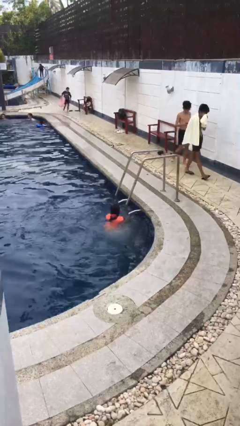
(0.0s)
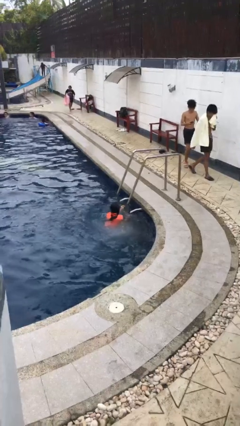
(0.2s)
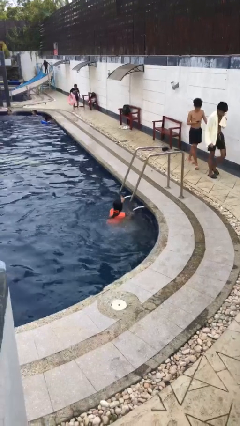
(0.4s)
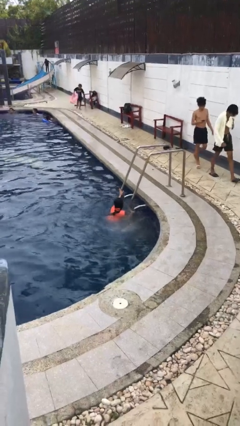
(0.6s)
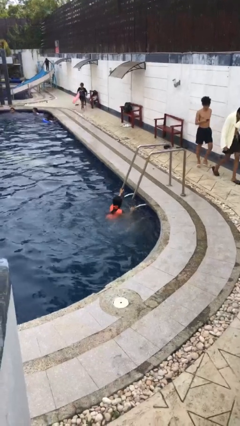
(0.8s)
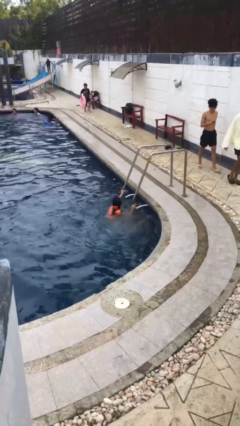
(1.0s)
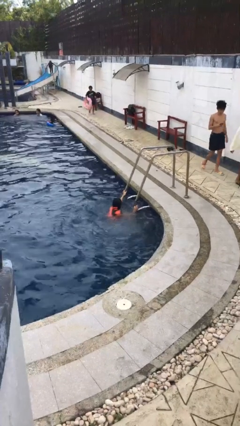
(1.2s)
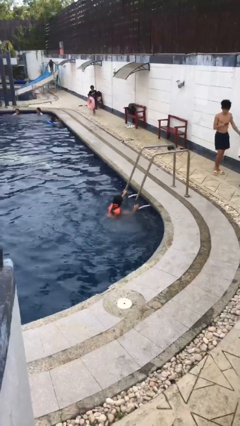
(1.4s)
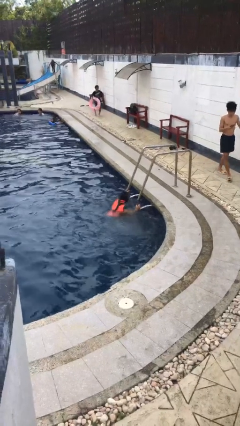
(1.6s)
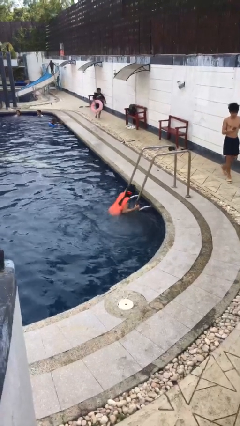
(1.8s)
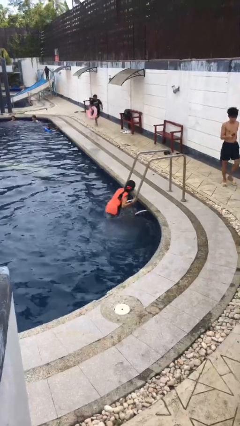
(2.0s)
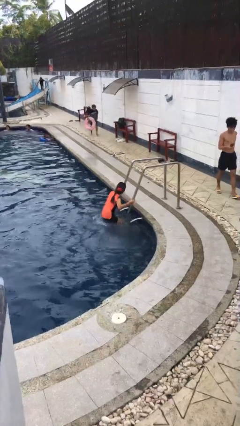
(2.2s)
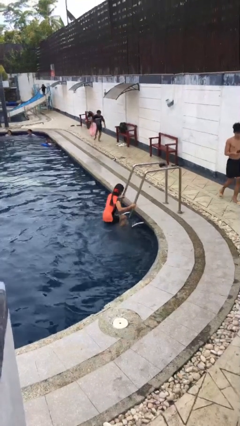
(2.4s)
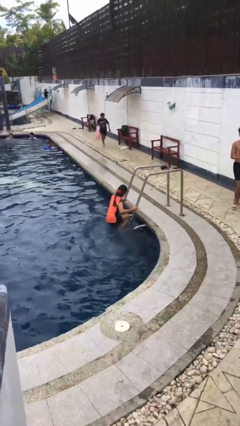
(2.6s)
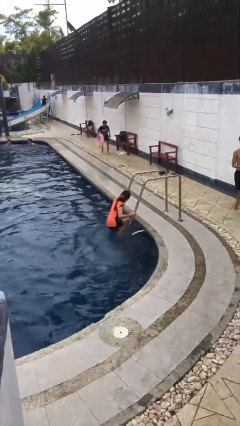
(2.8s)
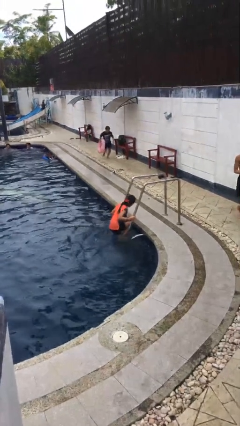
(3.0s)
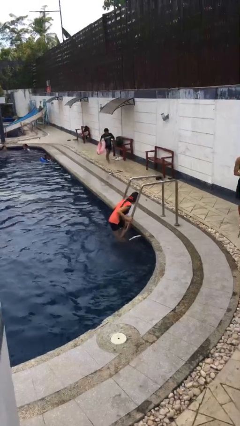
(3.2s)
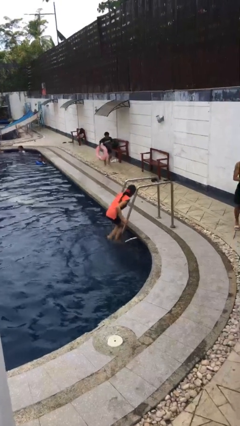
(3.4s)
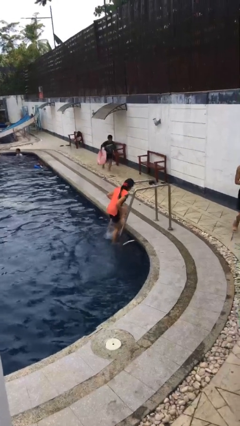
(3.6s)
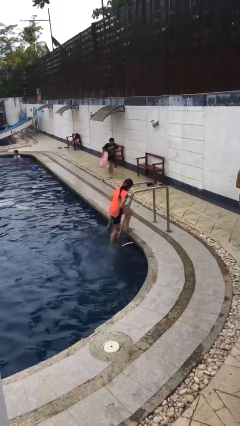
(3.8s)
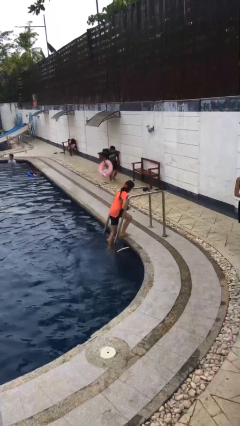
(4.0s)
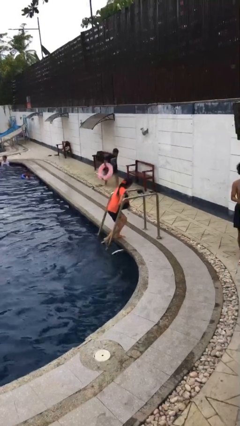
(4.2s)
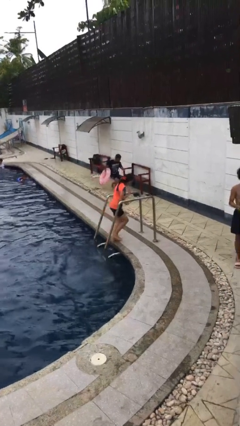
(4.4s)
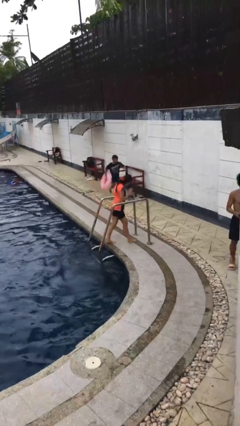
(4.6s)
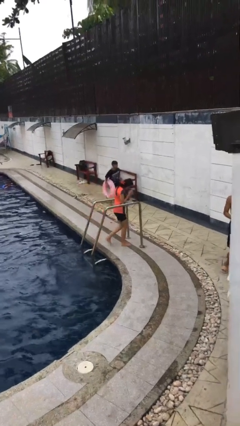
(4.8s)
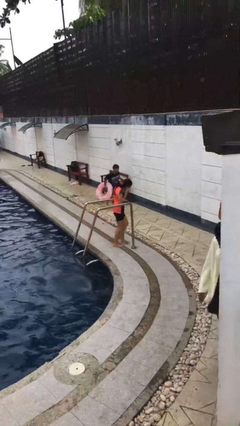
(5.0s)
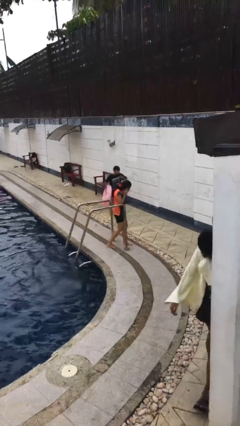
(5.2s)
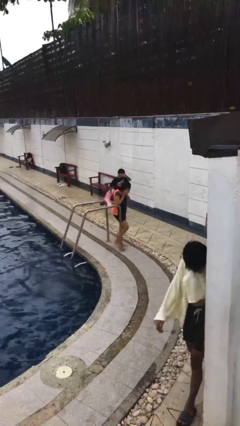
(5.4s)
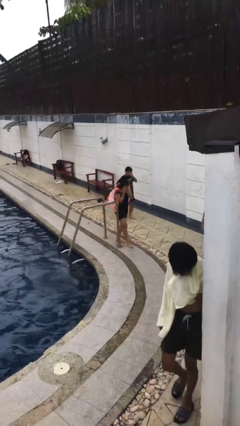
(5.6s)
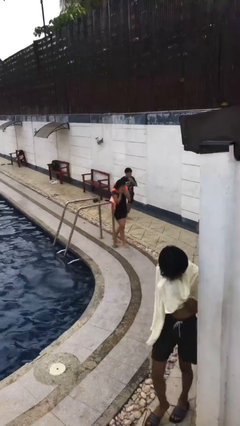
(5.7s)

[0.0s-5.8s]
person exits pool

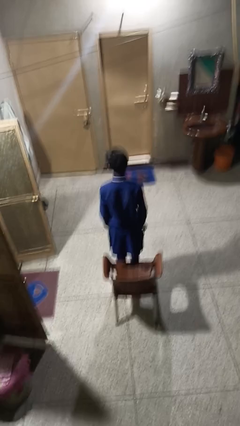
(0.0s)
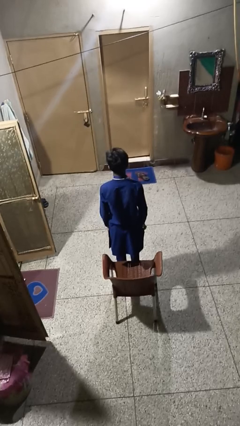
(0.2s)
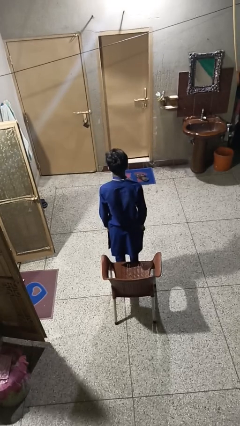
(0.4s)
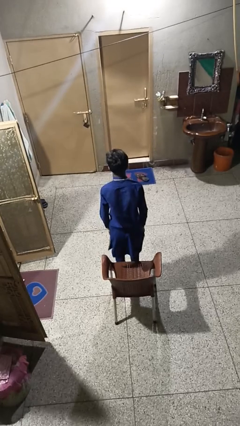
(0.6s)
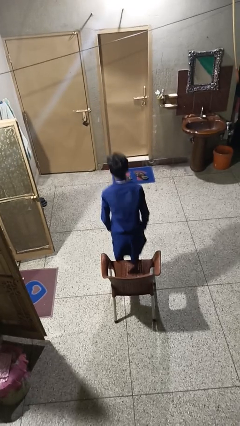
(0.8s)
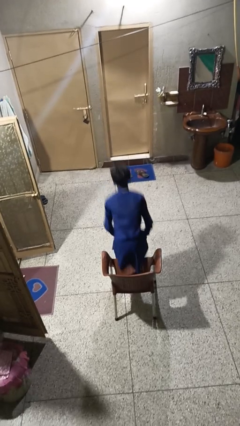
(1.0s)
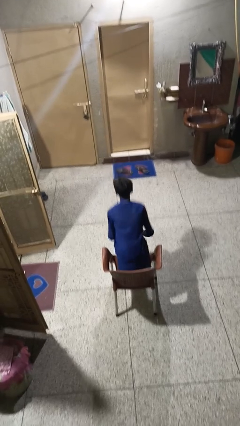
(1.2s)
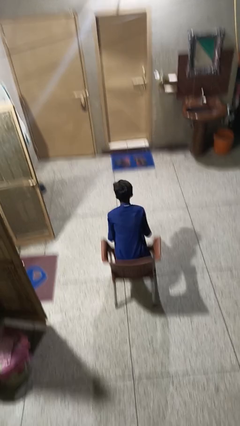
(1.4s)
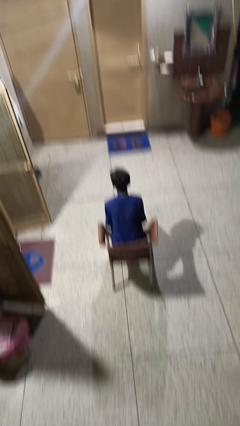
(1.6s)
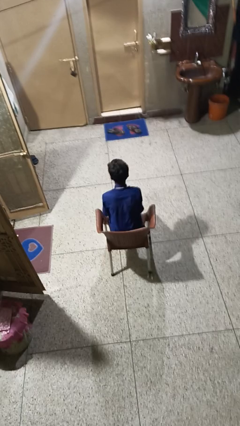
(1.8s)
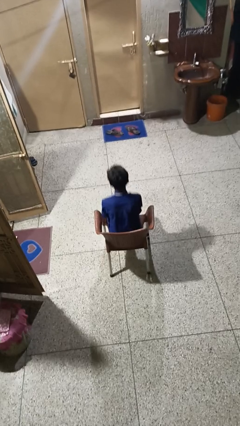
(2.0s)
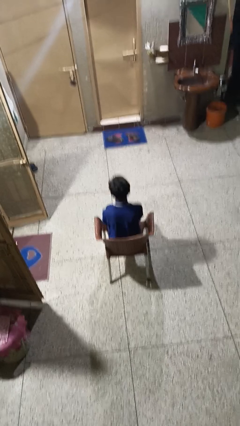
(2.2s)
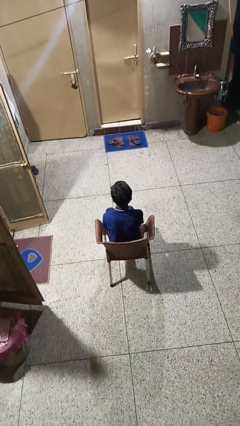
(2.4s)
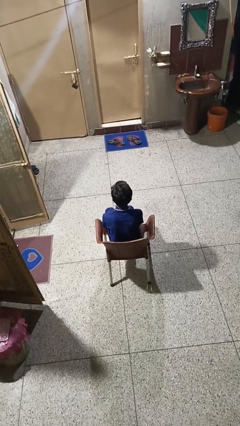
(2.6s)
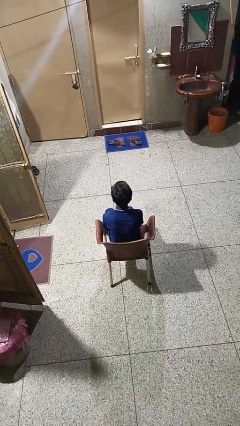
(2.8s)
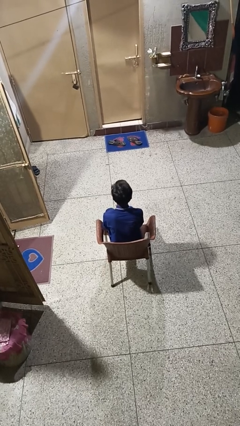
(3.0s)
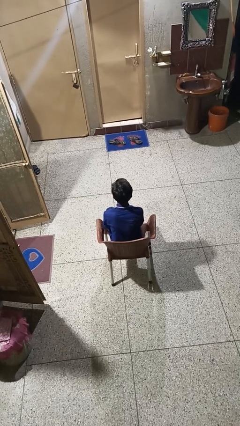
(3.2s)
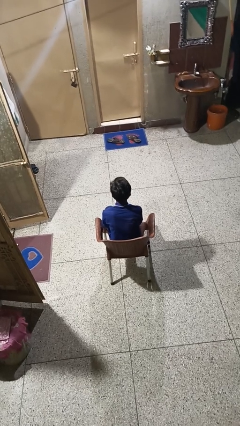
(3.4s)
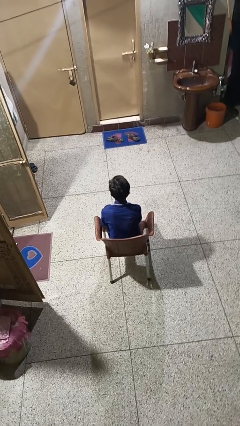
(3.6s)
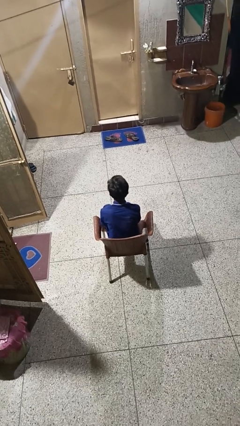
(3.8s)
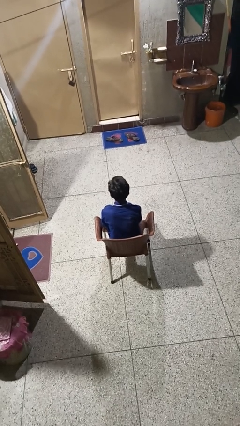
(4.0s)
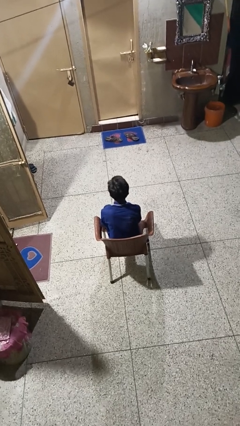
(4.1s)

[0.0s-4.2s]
person sits down

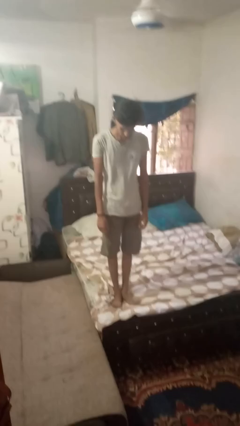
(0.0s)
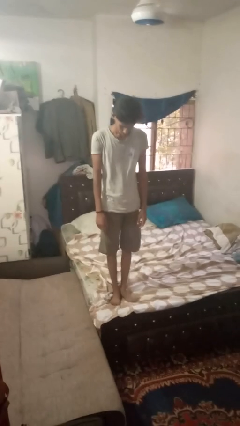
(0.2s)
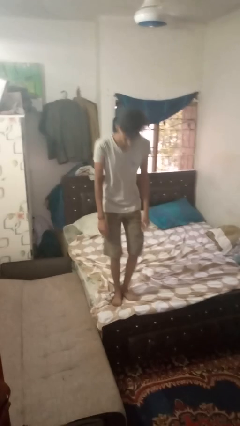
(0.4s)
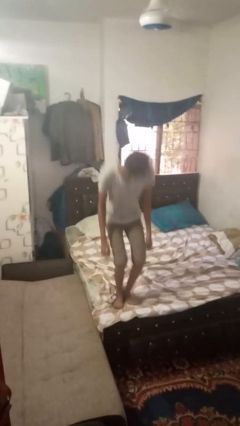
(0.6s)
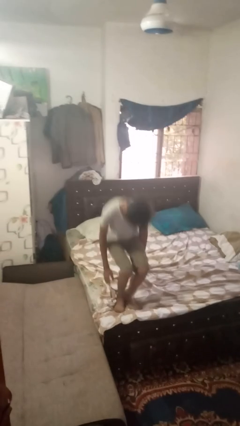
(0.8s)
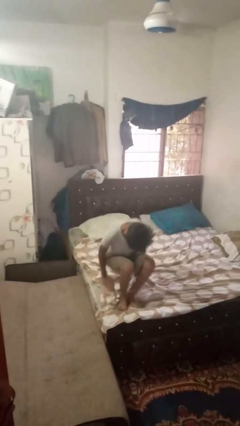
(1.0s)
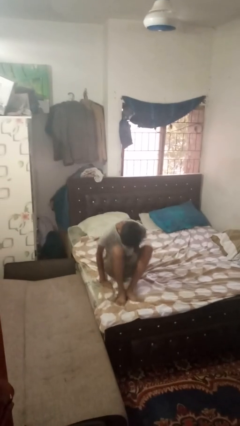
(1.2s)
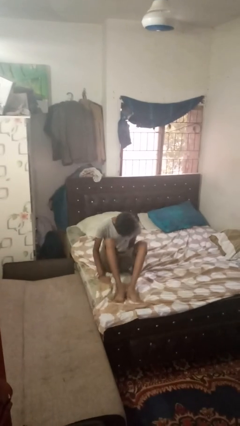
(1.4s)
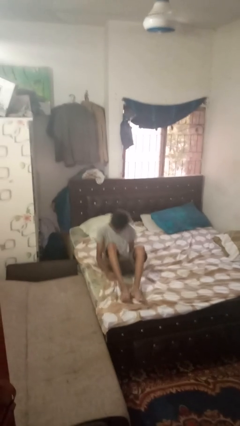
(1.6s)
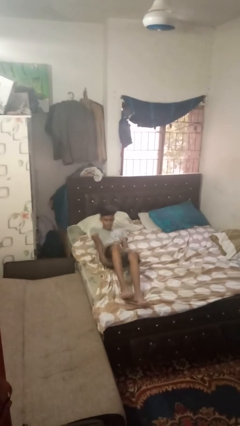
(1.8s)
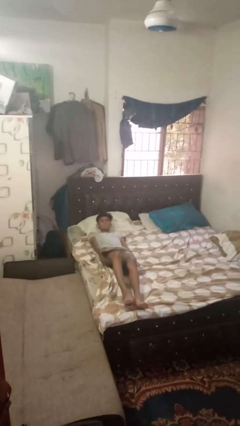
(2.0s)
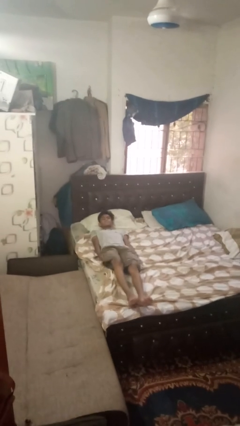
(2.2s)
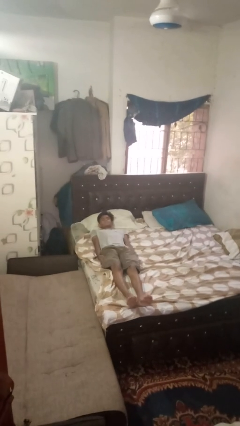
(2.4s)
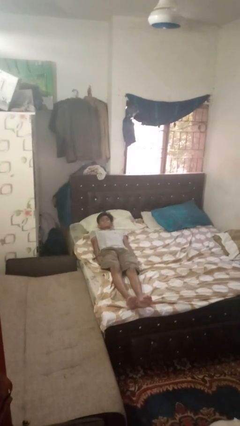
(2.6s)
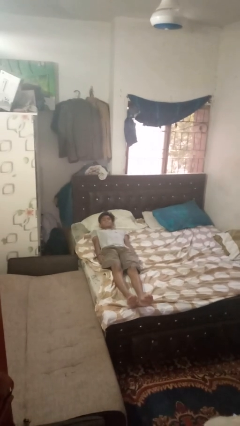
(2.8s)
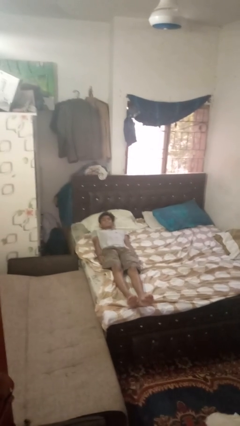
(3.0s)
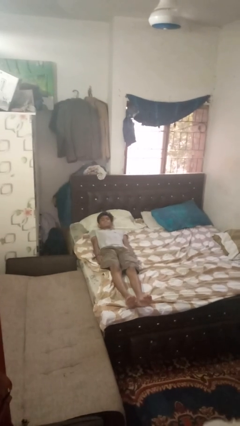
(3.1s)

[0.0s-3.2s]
person lies down on bed

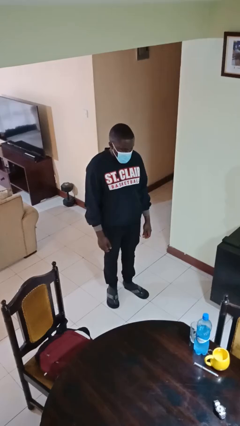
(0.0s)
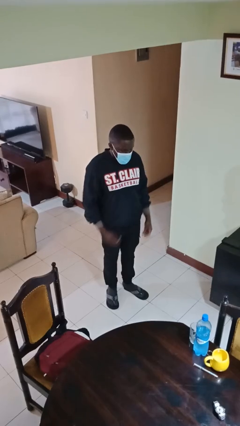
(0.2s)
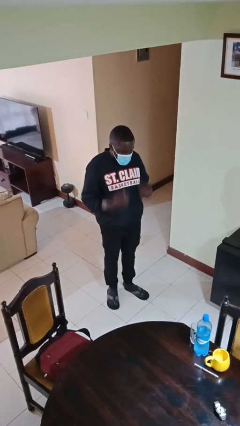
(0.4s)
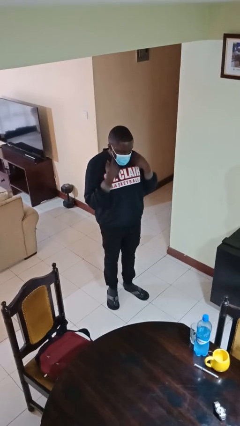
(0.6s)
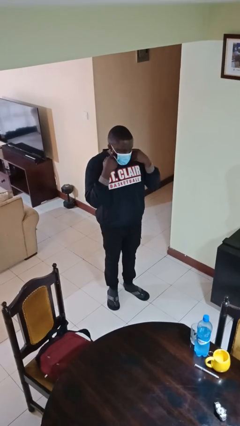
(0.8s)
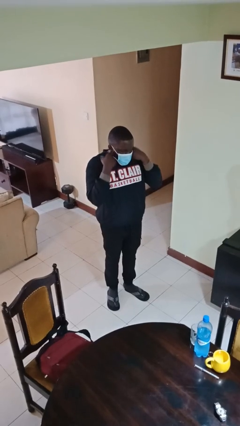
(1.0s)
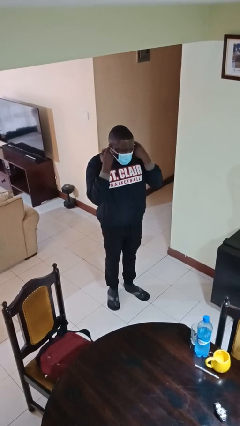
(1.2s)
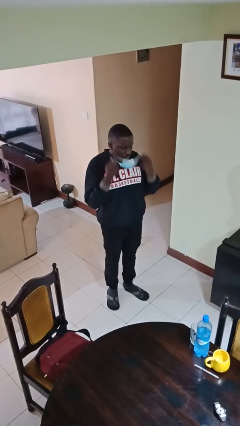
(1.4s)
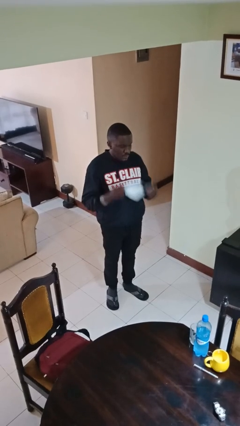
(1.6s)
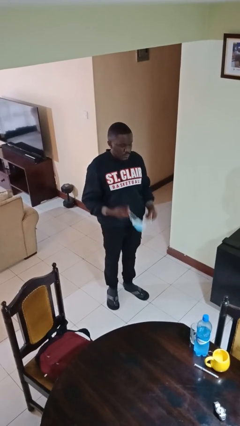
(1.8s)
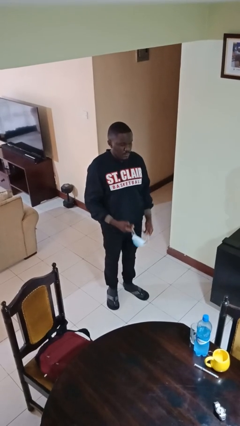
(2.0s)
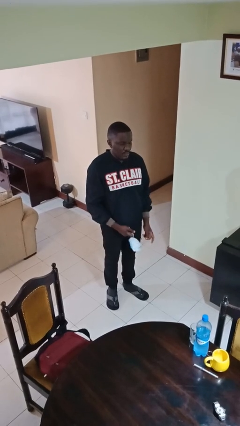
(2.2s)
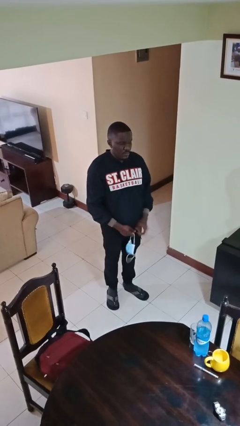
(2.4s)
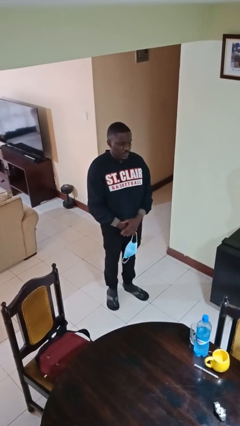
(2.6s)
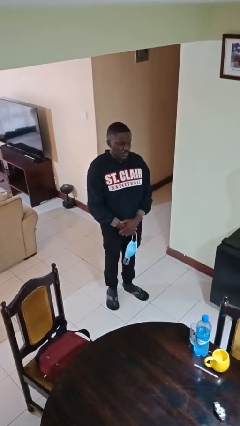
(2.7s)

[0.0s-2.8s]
person takes off facemask

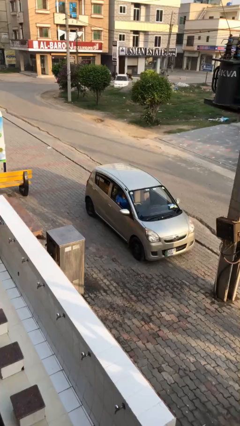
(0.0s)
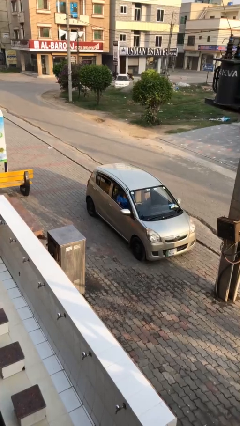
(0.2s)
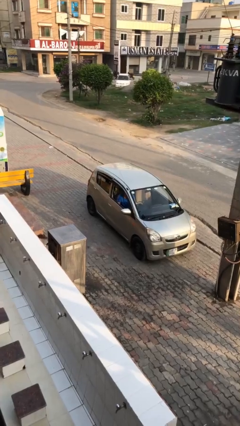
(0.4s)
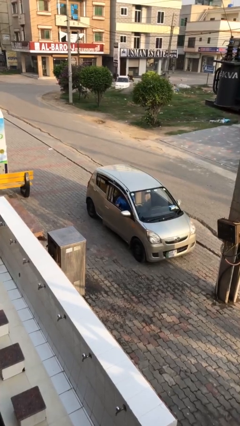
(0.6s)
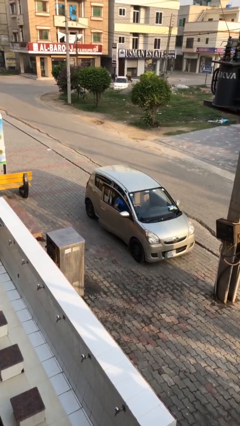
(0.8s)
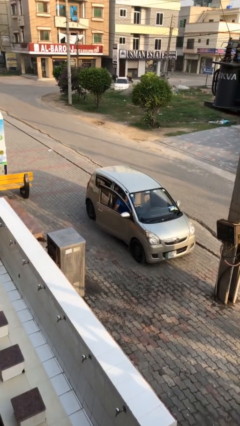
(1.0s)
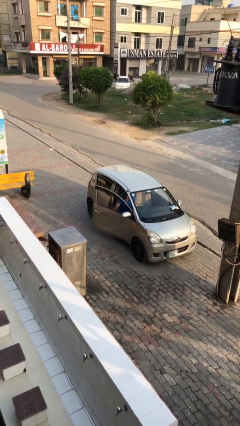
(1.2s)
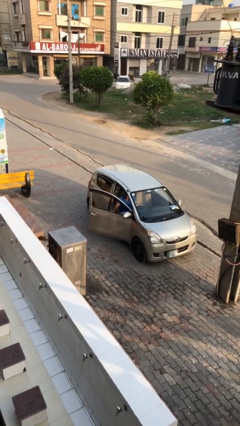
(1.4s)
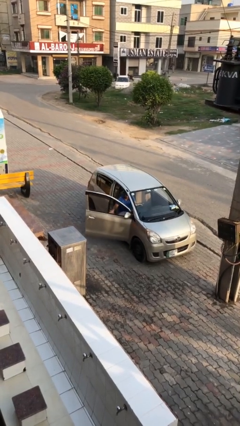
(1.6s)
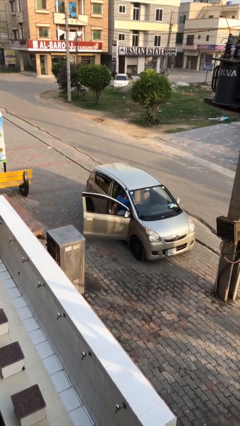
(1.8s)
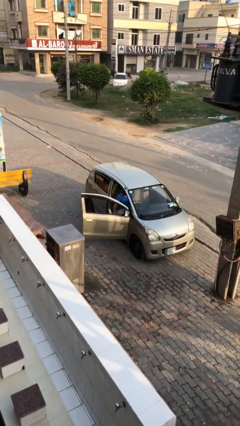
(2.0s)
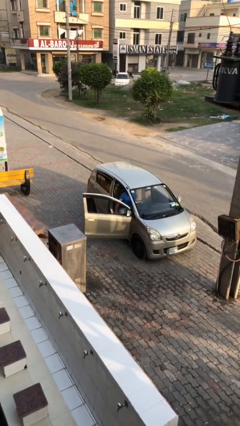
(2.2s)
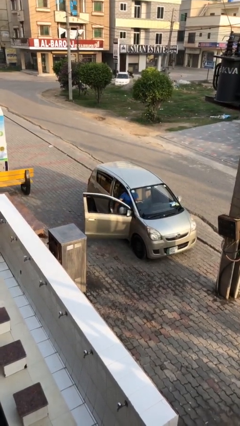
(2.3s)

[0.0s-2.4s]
person opens car door
